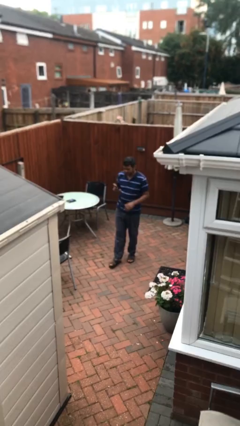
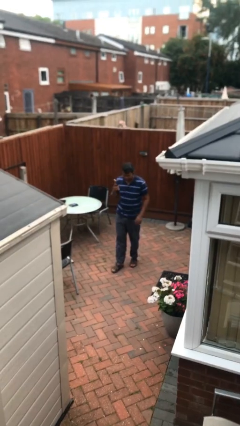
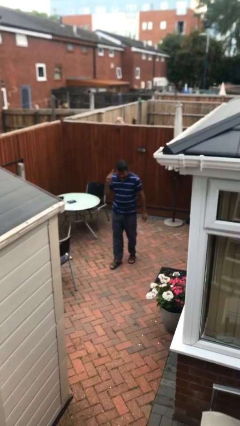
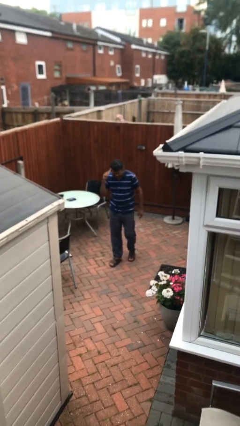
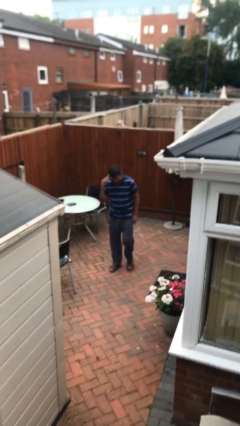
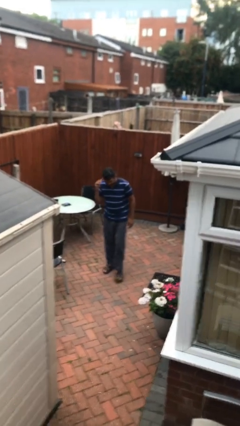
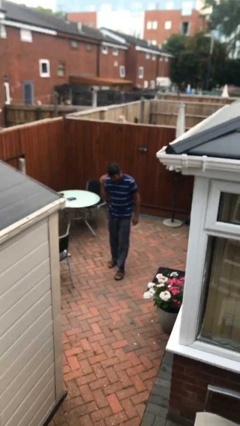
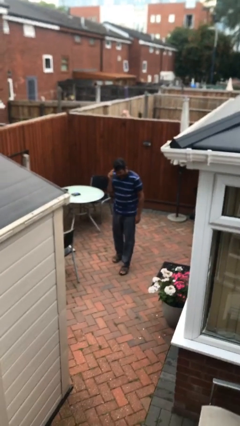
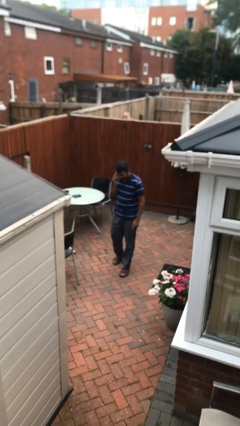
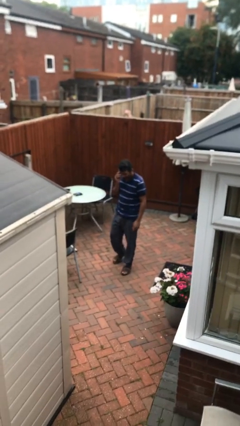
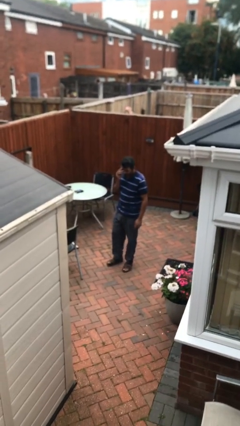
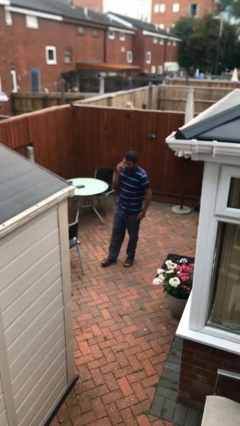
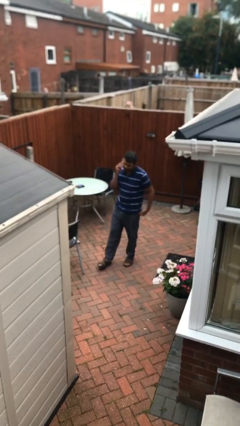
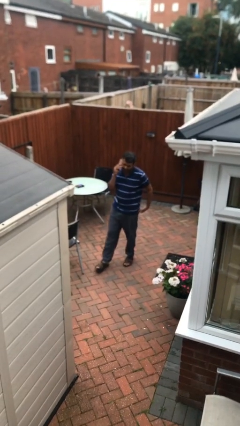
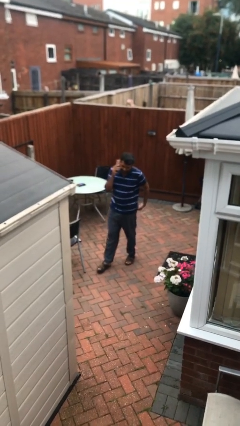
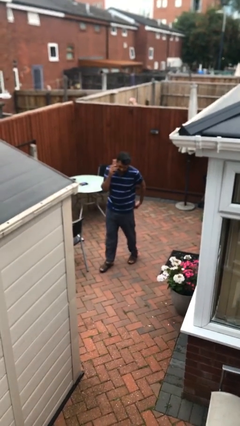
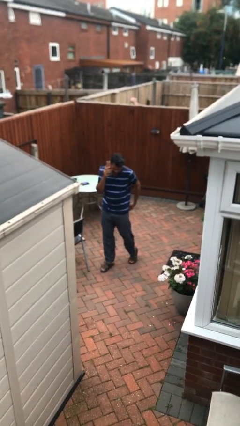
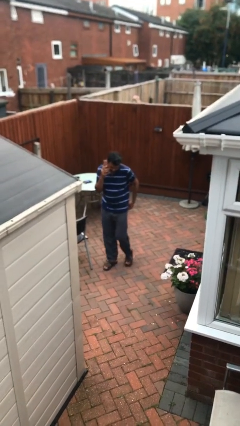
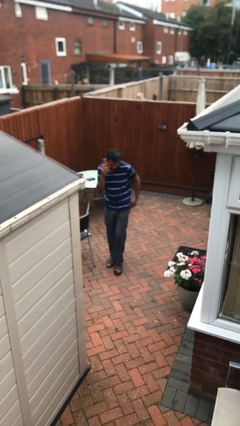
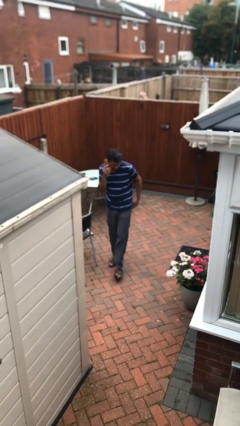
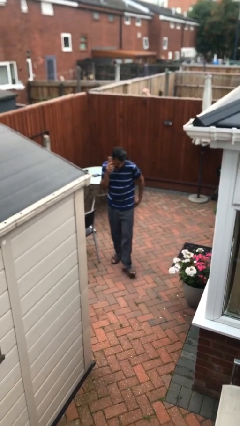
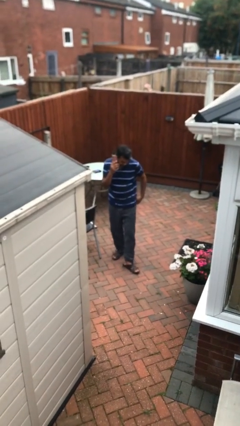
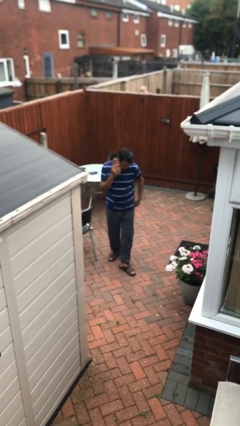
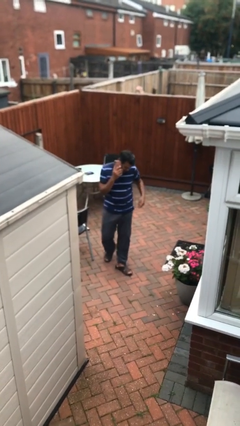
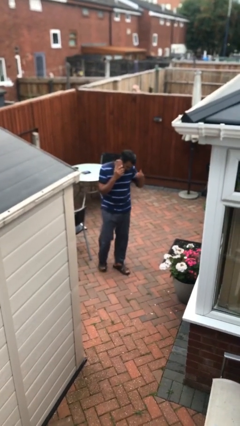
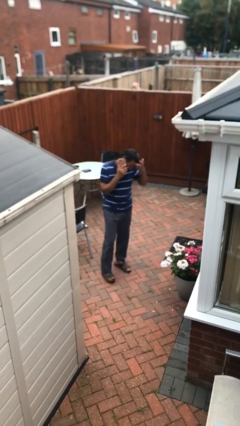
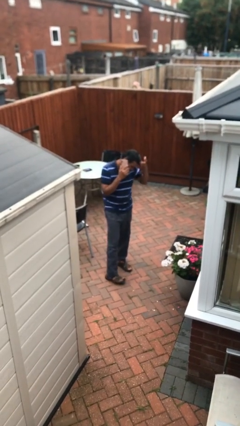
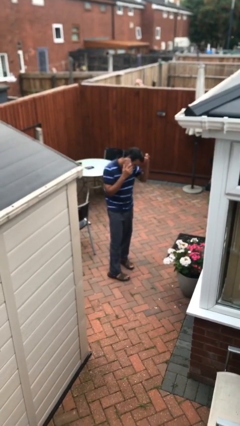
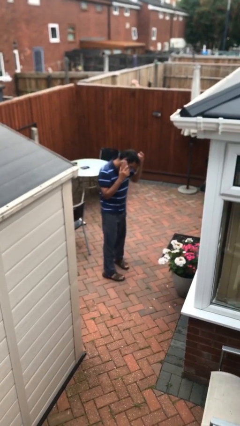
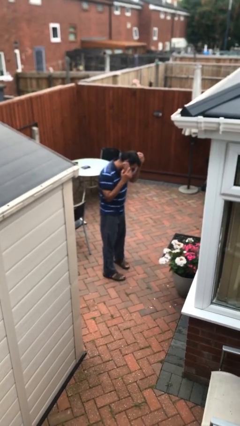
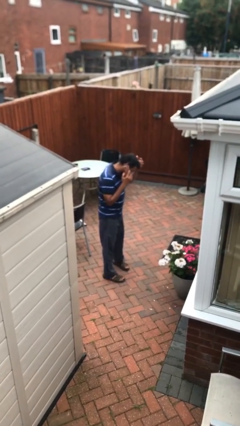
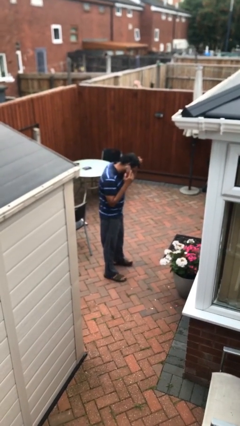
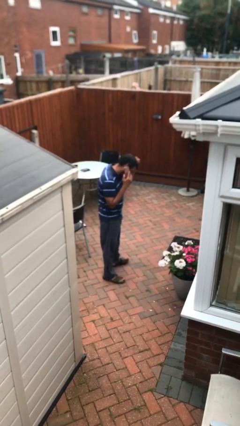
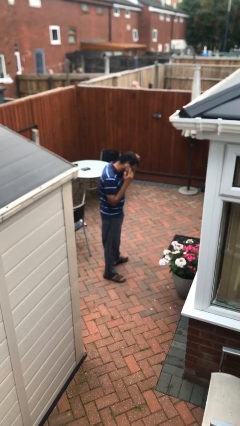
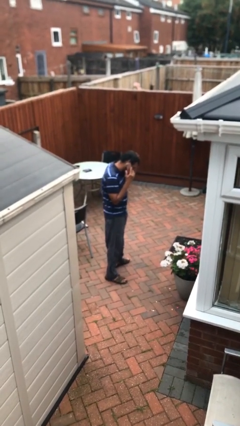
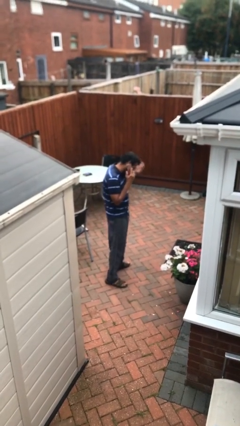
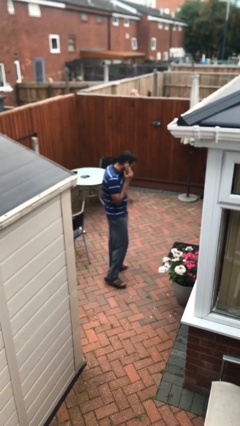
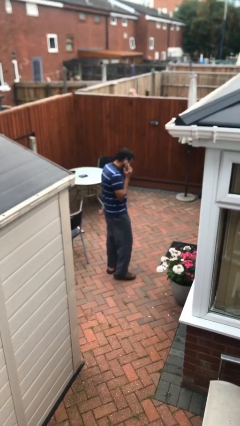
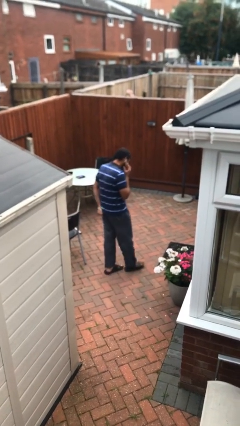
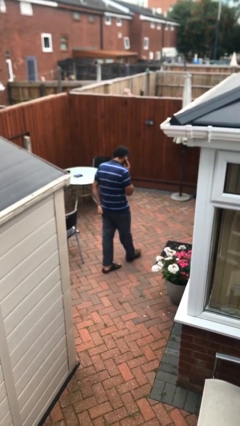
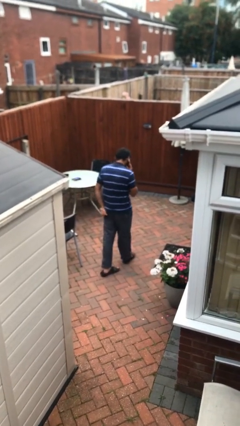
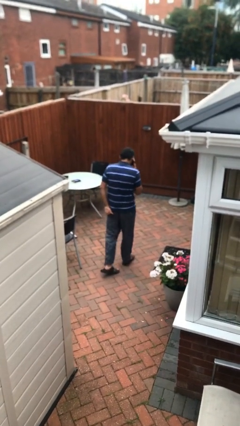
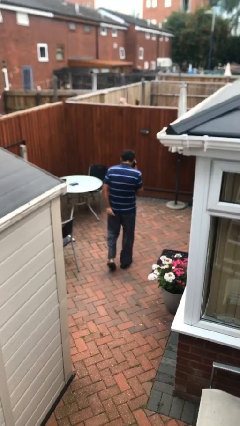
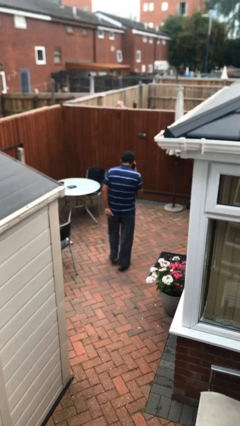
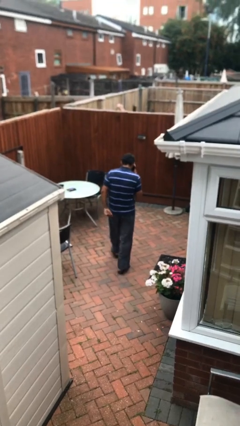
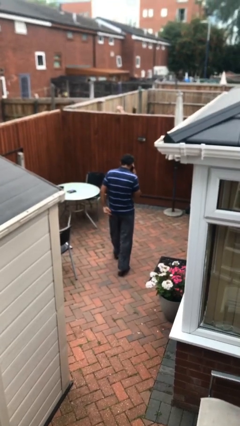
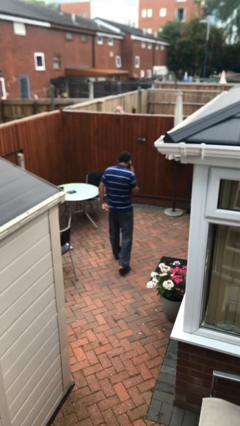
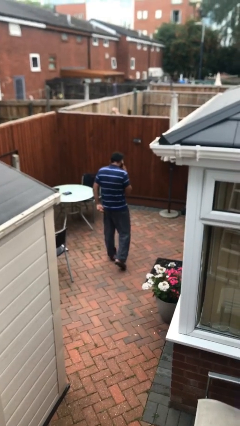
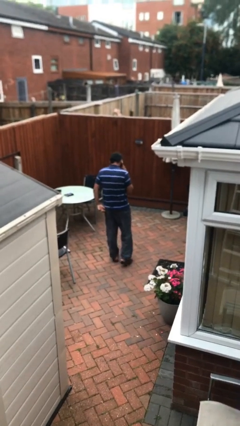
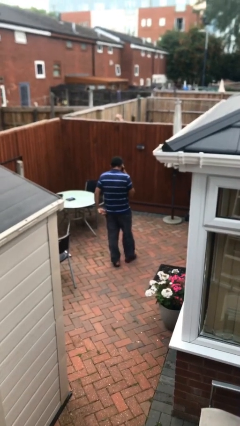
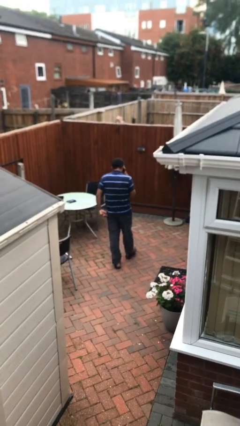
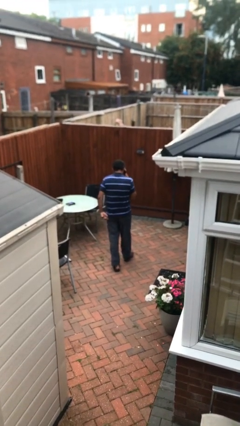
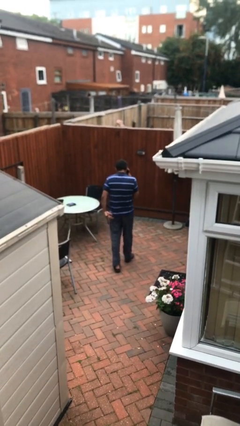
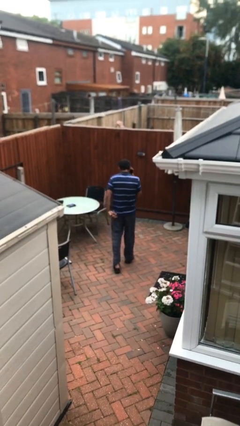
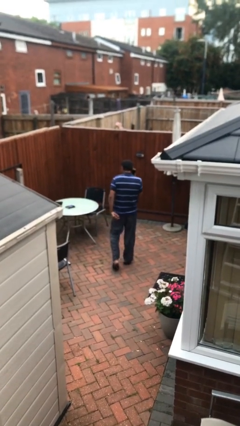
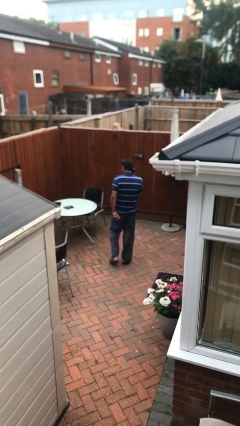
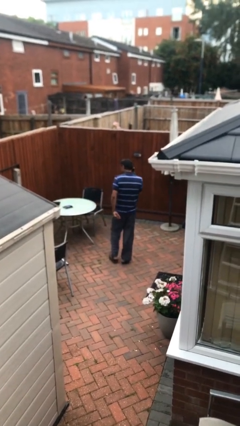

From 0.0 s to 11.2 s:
person talks on phone

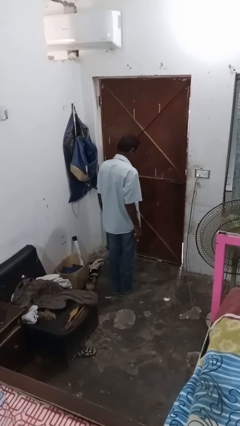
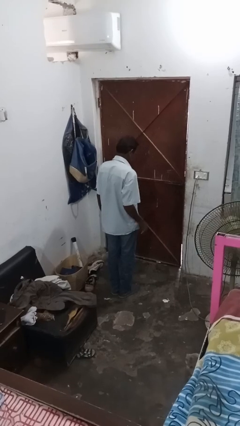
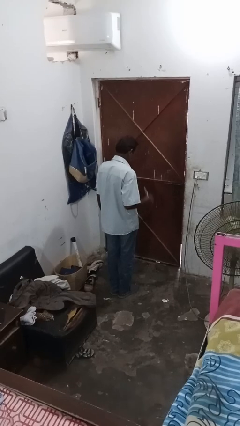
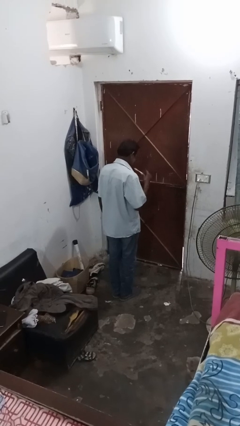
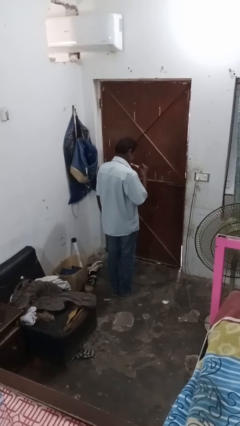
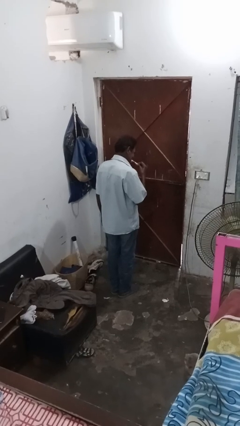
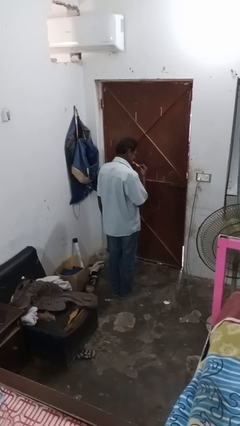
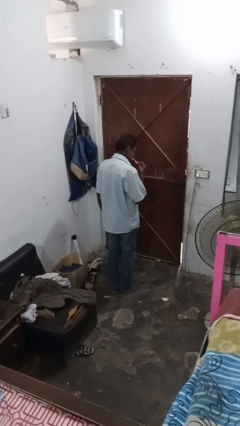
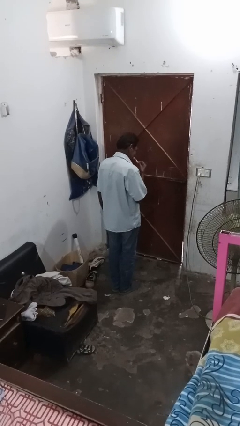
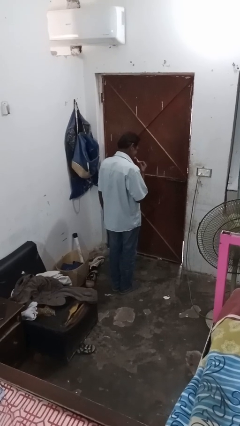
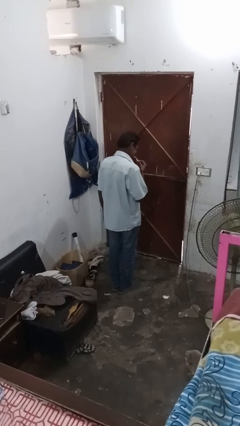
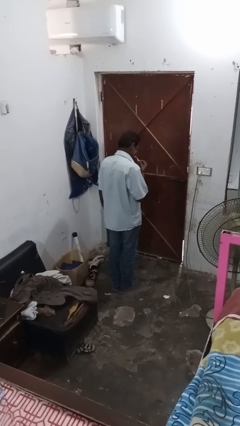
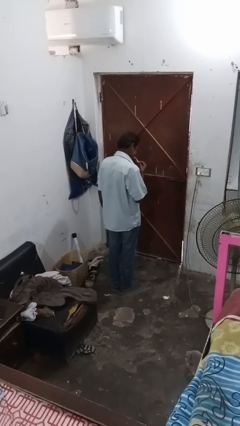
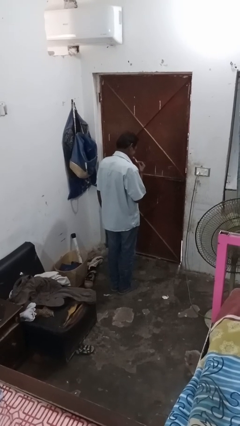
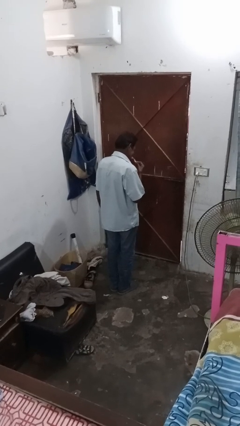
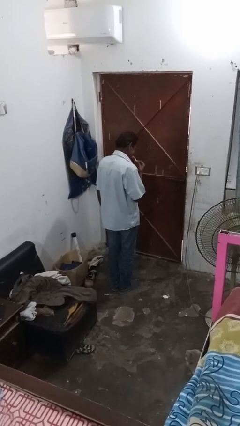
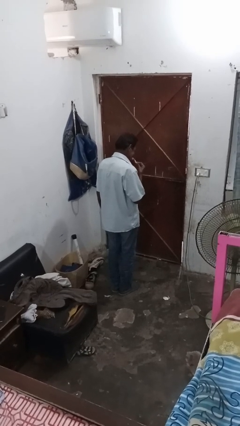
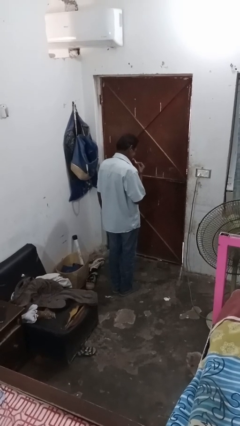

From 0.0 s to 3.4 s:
person brushes teeth

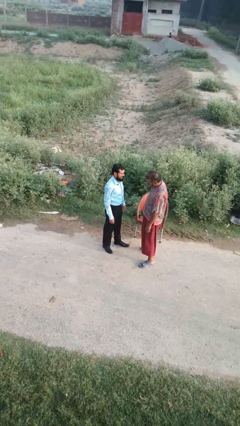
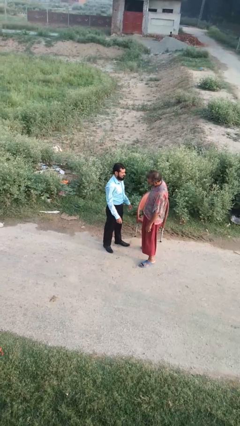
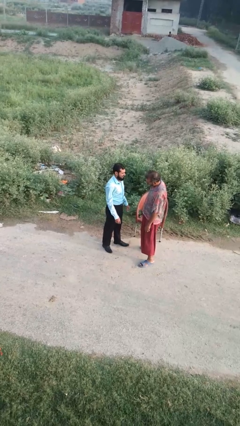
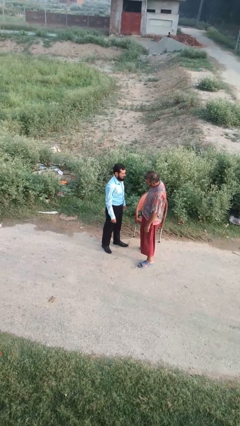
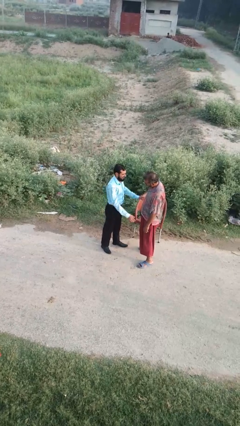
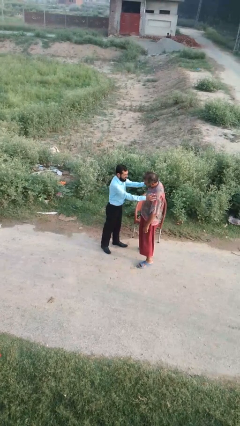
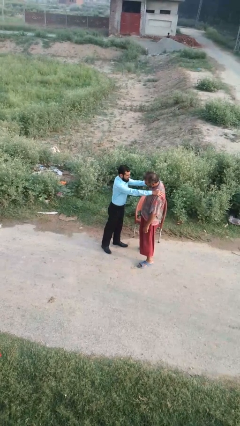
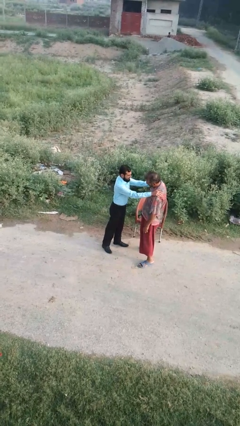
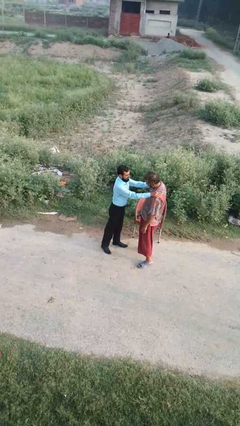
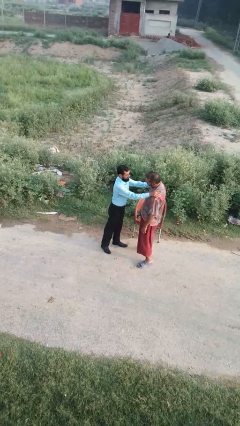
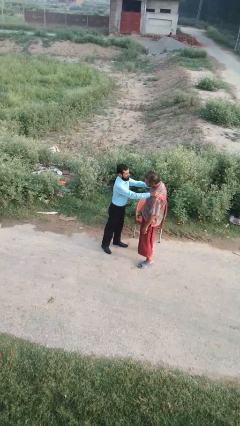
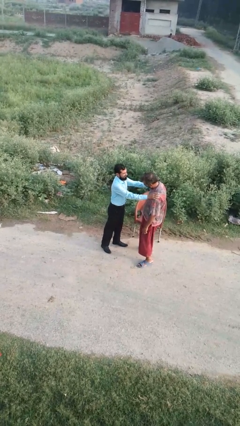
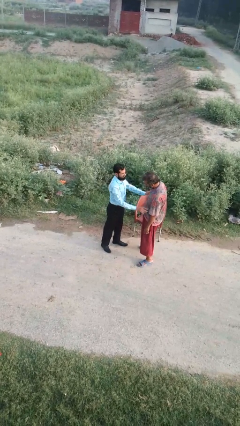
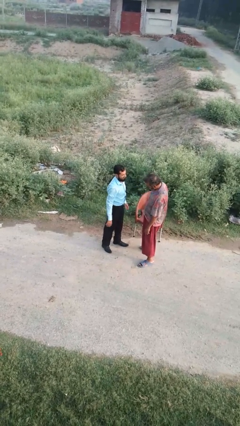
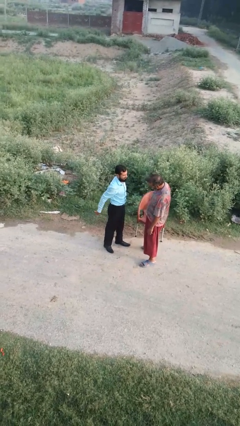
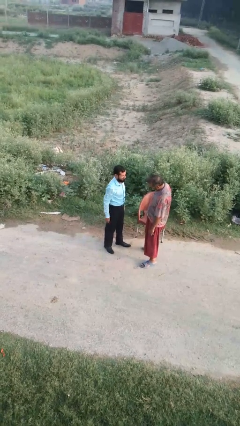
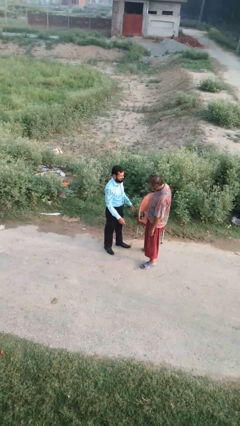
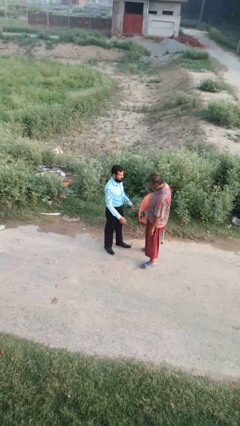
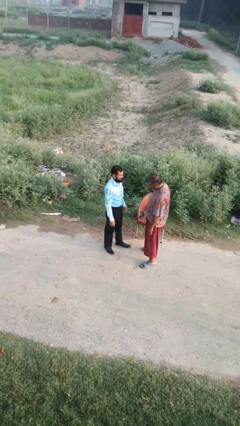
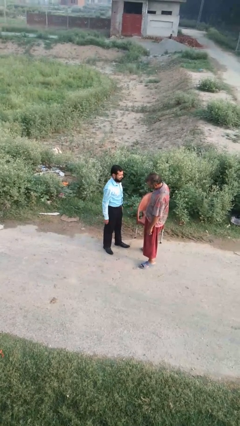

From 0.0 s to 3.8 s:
person pounds shoulders of person
